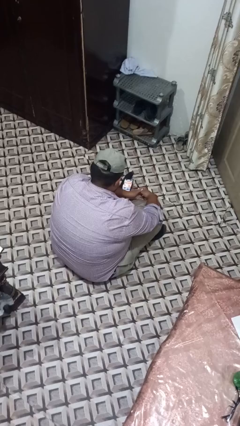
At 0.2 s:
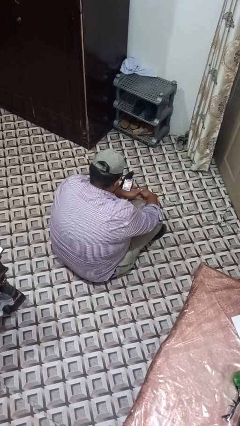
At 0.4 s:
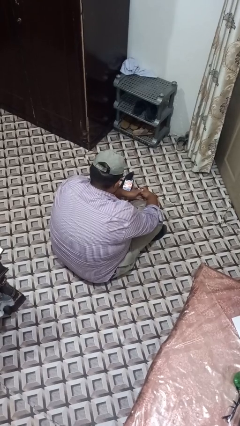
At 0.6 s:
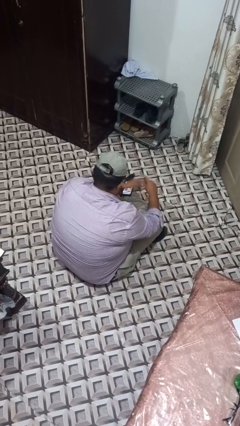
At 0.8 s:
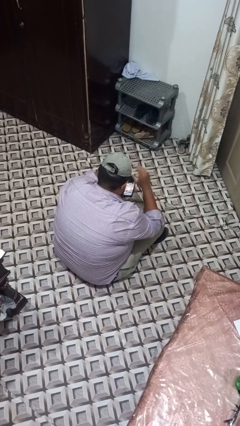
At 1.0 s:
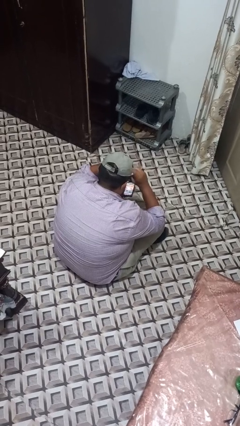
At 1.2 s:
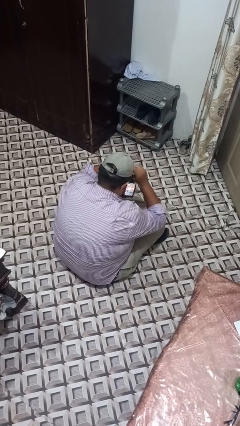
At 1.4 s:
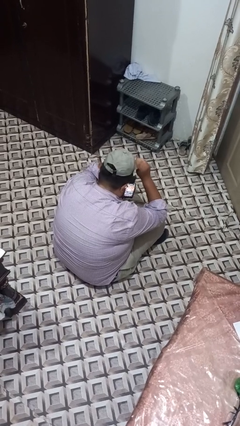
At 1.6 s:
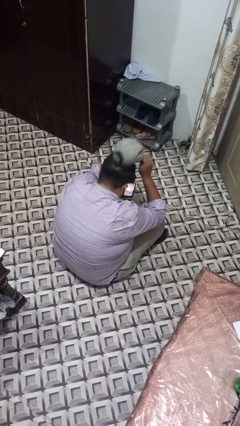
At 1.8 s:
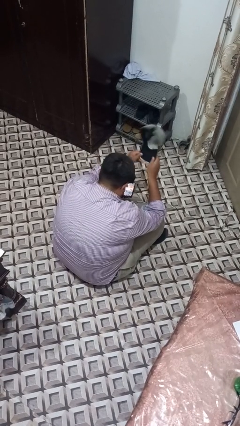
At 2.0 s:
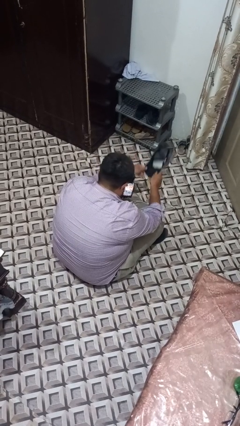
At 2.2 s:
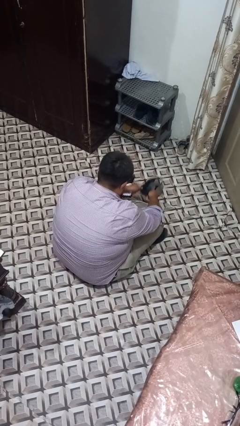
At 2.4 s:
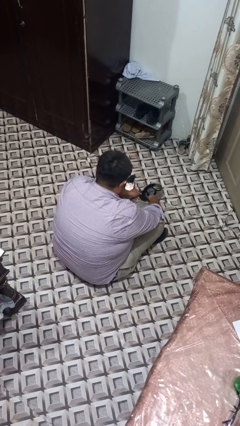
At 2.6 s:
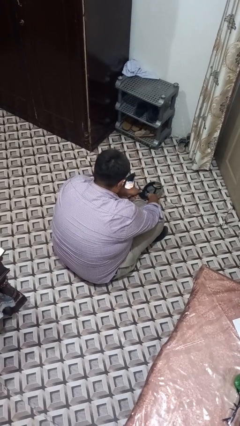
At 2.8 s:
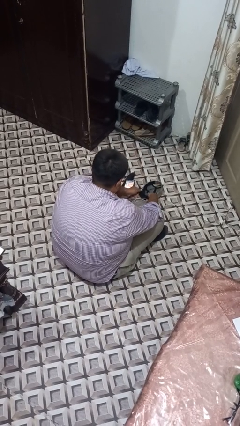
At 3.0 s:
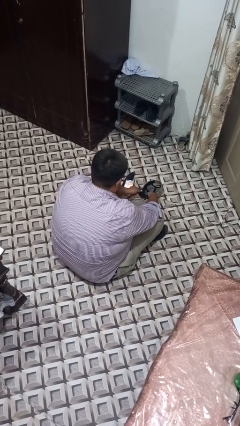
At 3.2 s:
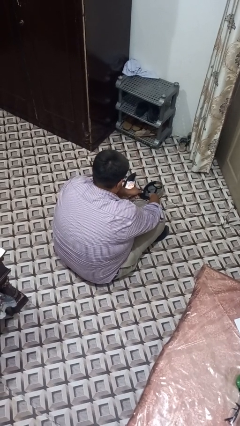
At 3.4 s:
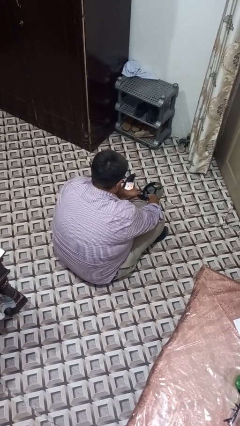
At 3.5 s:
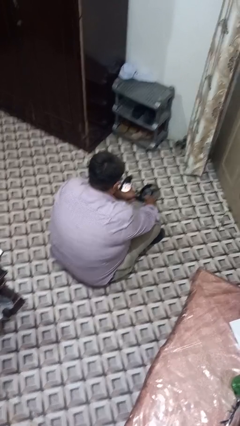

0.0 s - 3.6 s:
person takes off hat

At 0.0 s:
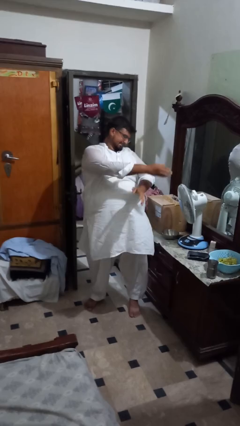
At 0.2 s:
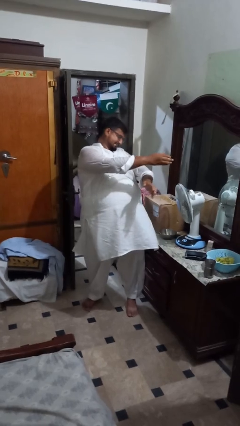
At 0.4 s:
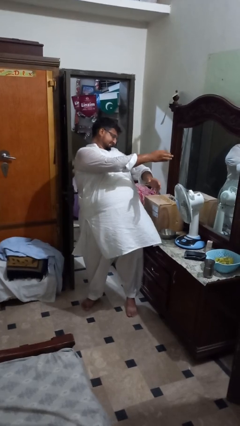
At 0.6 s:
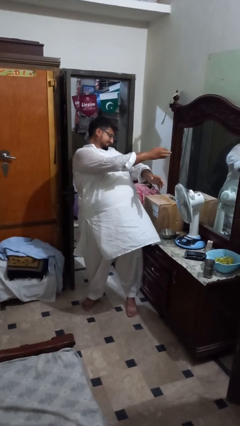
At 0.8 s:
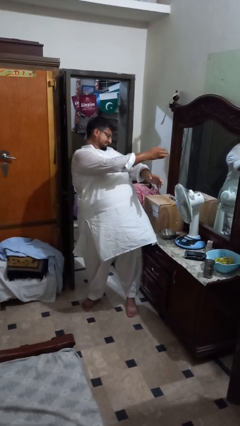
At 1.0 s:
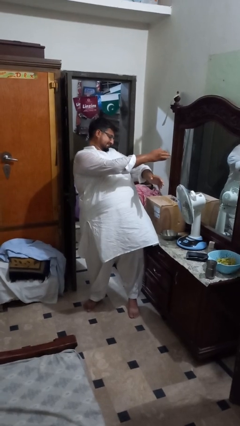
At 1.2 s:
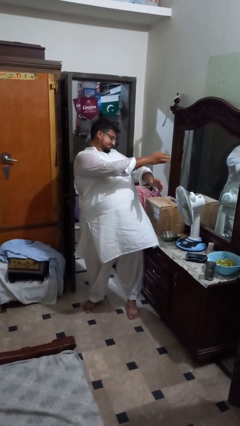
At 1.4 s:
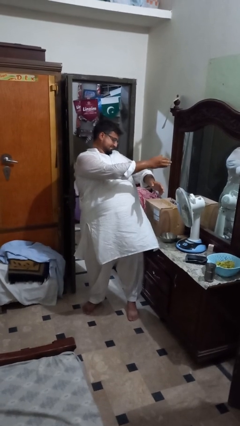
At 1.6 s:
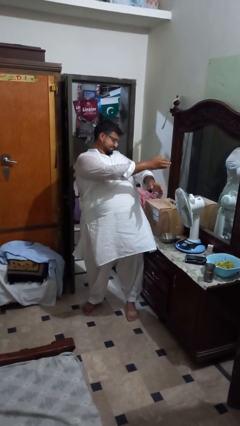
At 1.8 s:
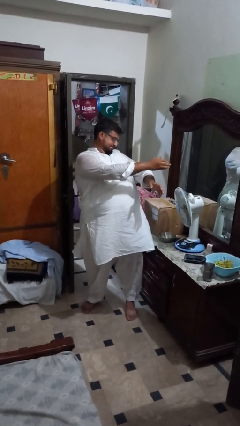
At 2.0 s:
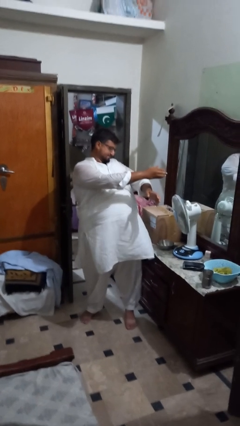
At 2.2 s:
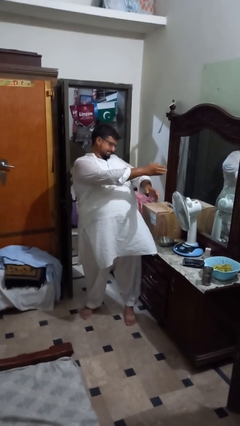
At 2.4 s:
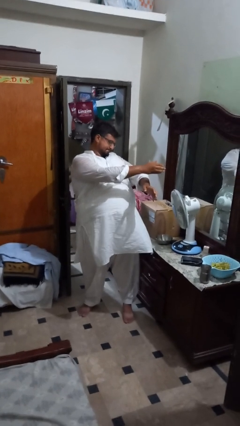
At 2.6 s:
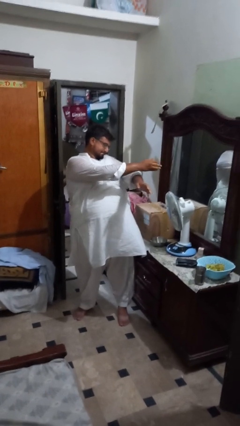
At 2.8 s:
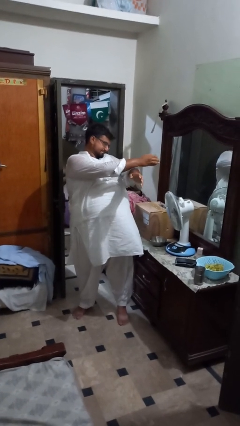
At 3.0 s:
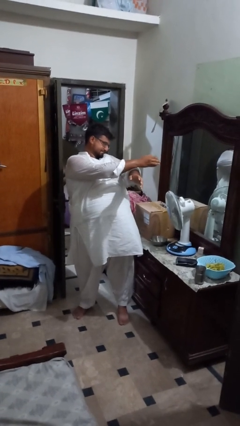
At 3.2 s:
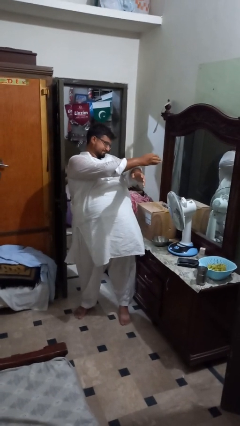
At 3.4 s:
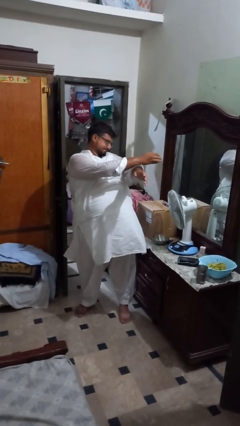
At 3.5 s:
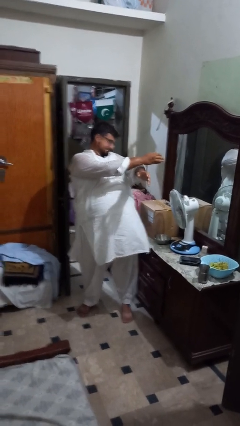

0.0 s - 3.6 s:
person stretches arms to side

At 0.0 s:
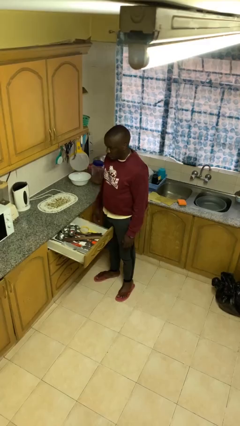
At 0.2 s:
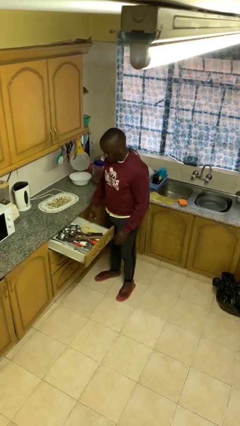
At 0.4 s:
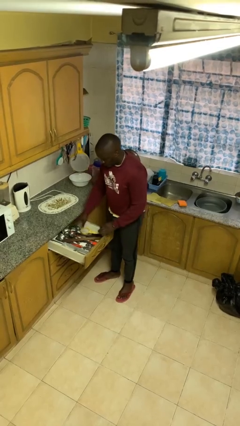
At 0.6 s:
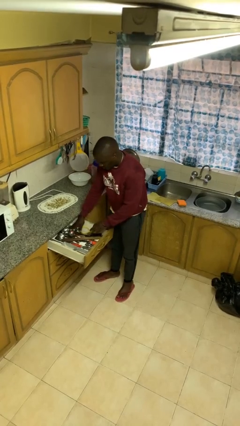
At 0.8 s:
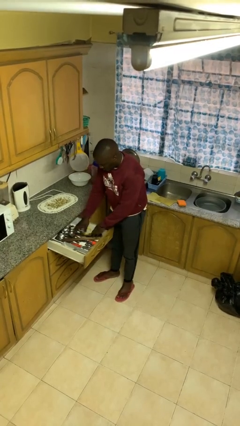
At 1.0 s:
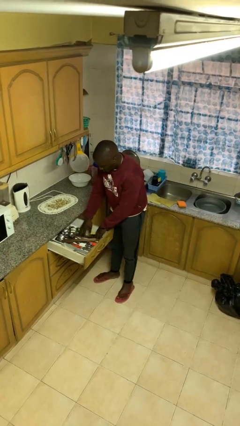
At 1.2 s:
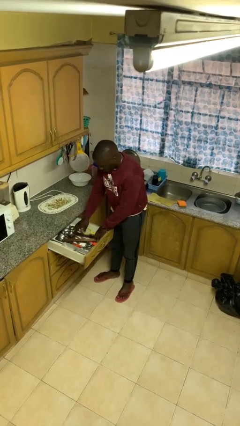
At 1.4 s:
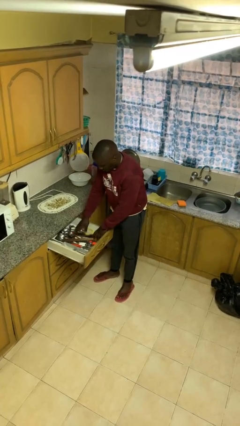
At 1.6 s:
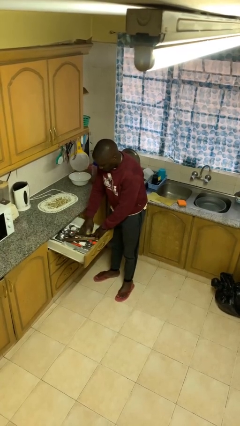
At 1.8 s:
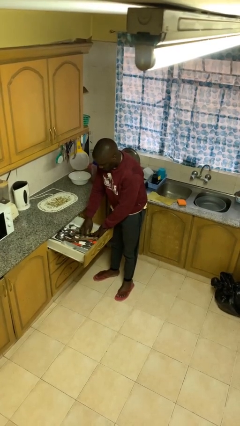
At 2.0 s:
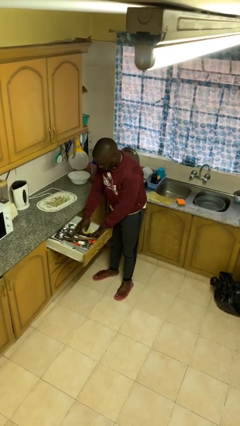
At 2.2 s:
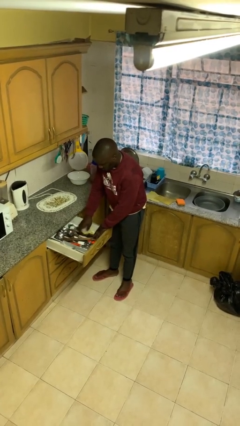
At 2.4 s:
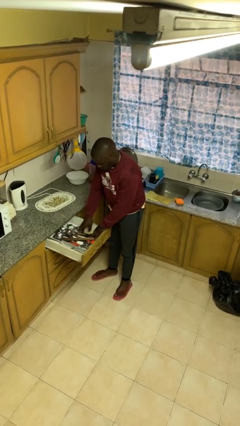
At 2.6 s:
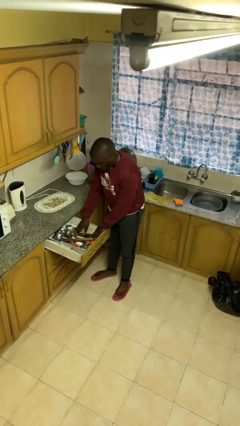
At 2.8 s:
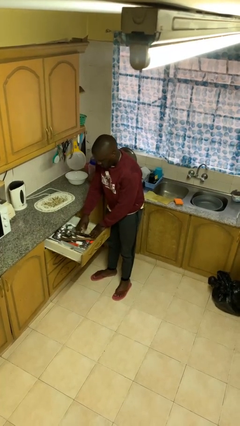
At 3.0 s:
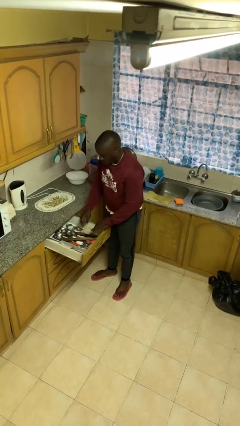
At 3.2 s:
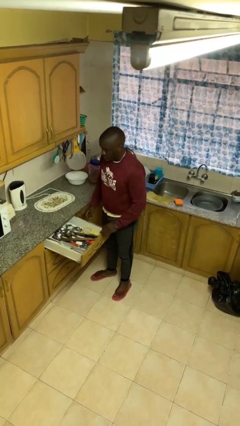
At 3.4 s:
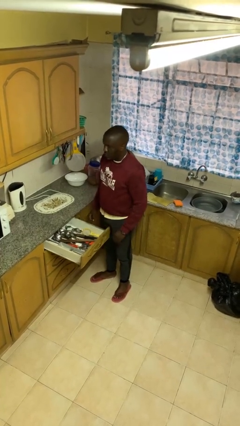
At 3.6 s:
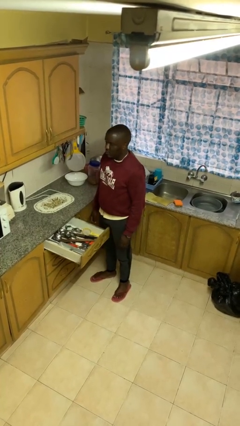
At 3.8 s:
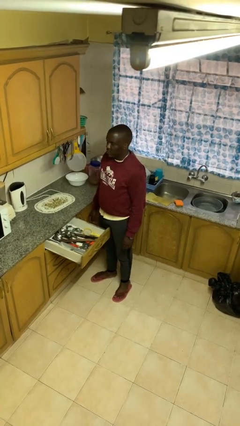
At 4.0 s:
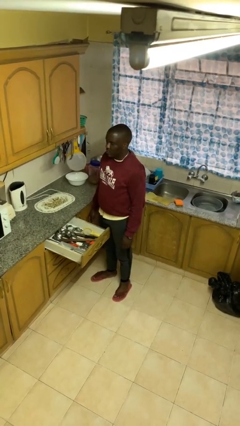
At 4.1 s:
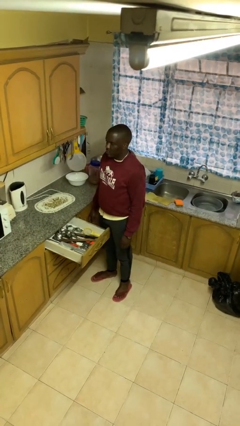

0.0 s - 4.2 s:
person searches in kitchen drawer

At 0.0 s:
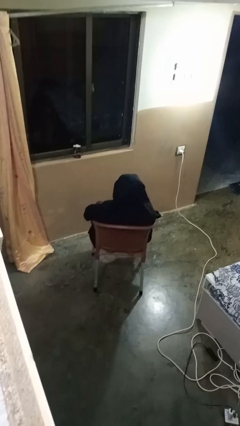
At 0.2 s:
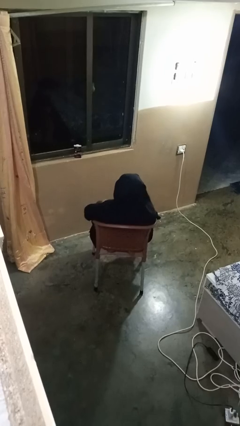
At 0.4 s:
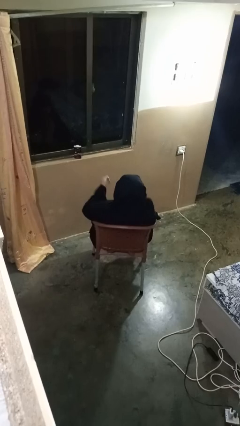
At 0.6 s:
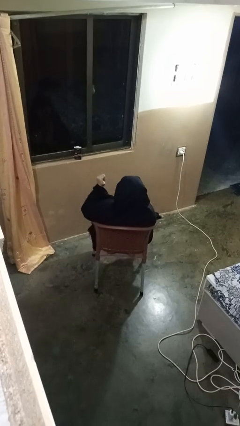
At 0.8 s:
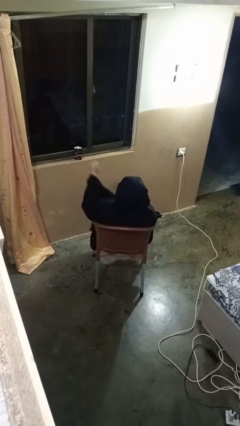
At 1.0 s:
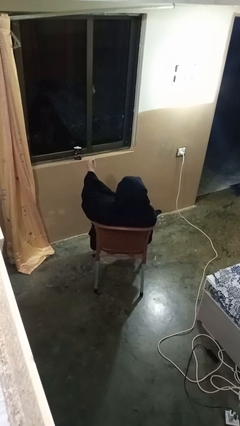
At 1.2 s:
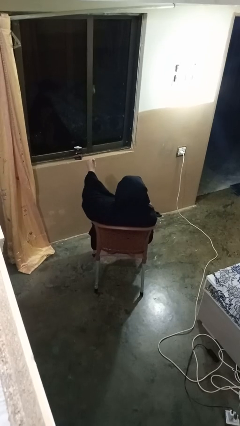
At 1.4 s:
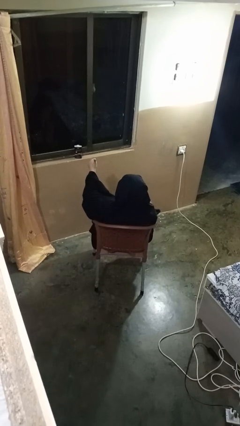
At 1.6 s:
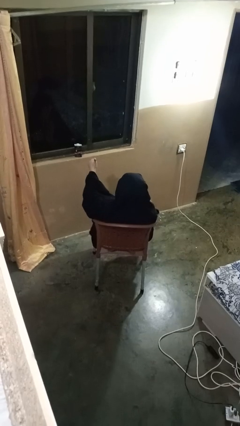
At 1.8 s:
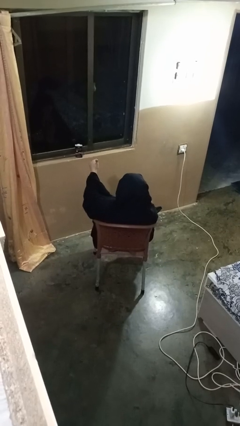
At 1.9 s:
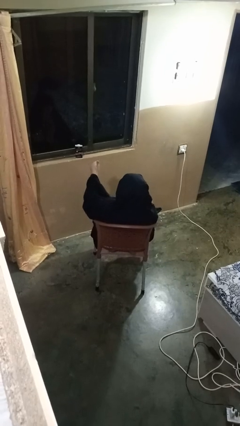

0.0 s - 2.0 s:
person gestures thumbs up

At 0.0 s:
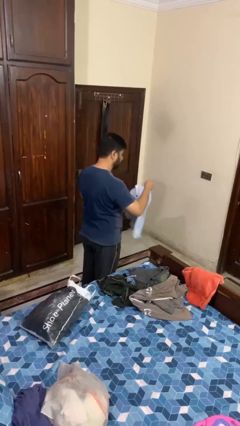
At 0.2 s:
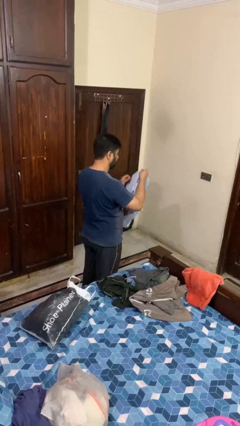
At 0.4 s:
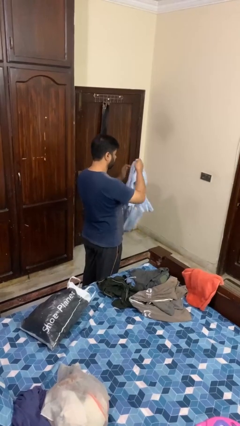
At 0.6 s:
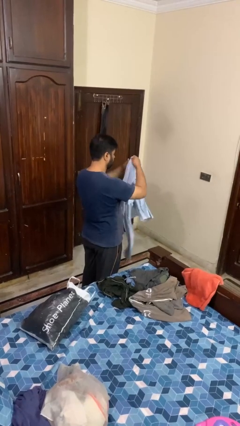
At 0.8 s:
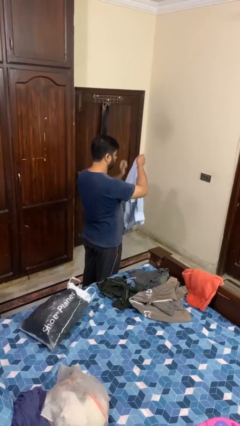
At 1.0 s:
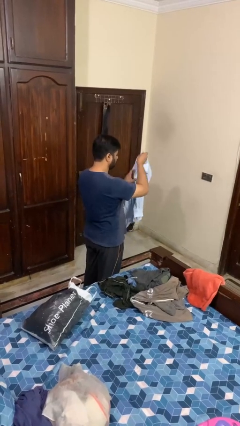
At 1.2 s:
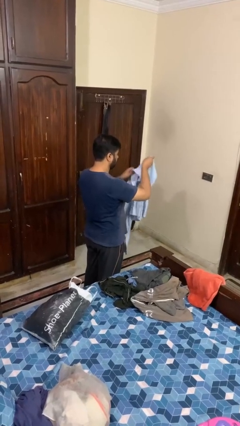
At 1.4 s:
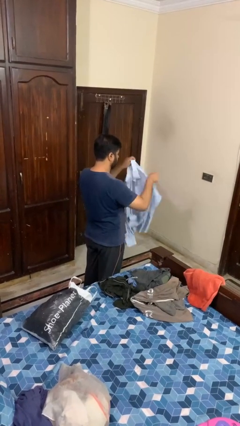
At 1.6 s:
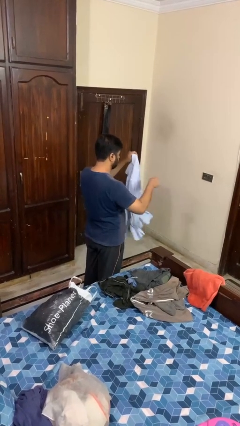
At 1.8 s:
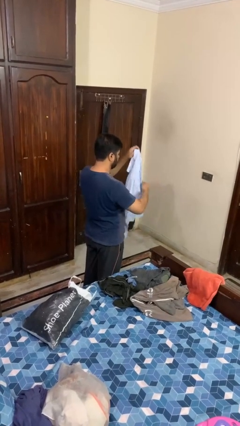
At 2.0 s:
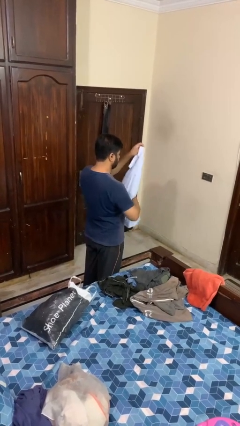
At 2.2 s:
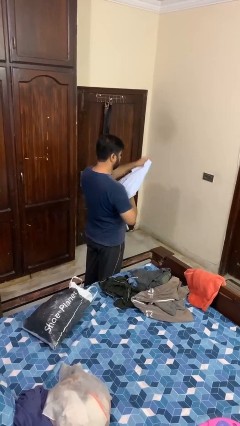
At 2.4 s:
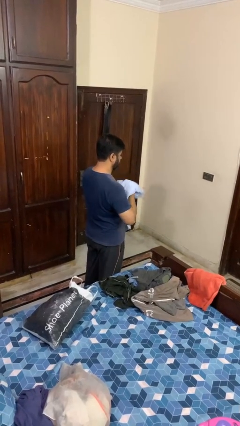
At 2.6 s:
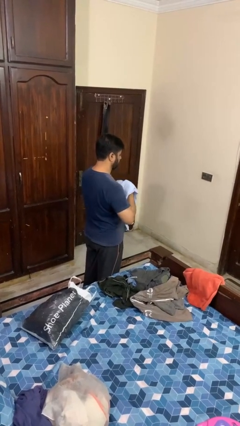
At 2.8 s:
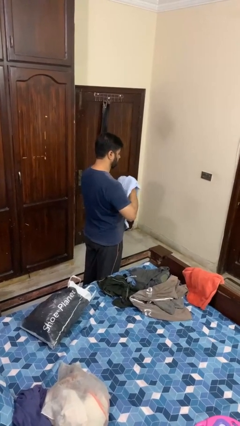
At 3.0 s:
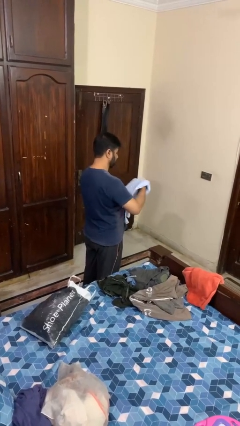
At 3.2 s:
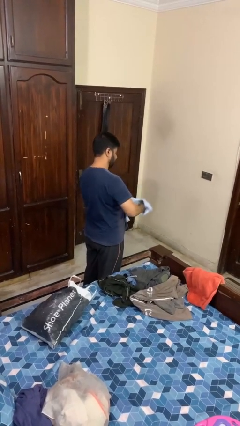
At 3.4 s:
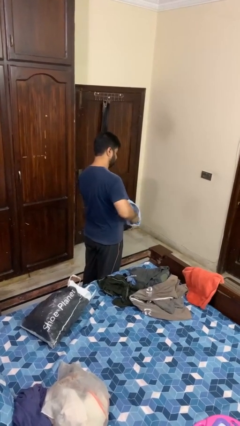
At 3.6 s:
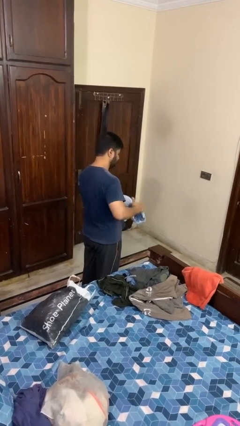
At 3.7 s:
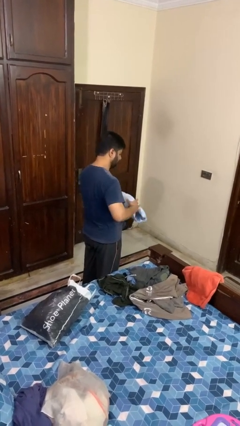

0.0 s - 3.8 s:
person folds shirt

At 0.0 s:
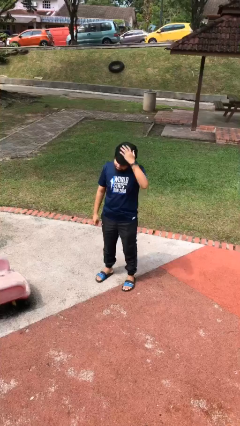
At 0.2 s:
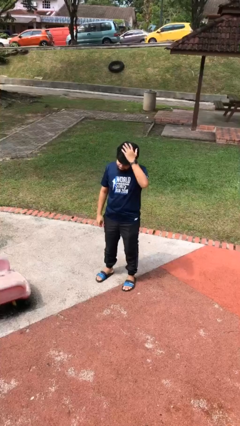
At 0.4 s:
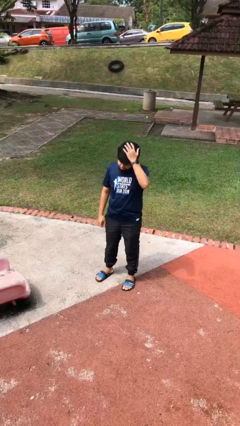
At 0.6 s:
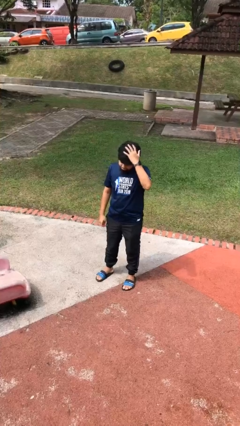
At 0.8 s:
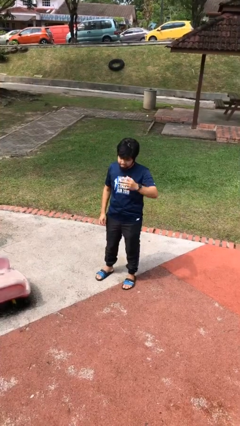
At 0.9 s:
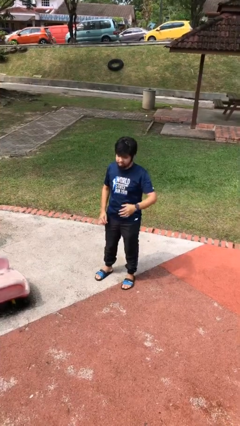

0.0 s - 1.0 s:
person pats head
